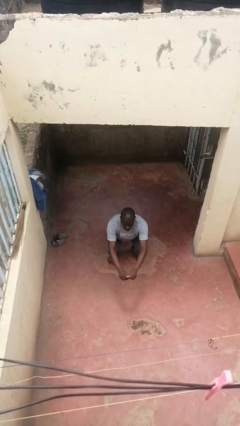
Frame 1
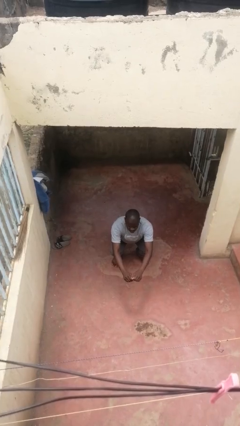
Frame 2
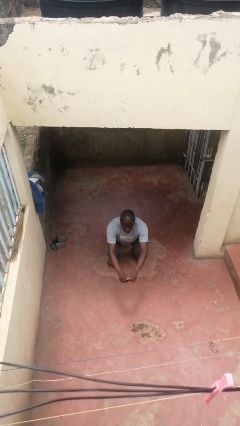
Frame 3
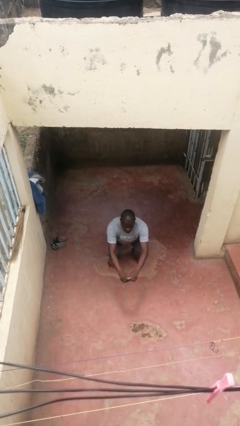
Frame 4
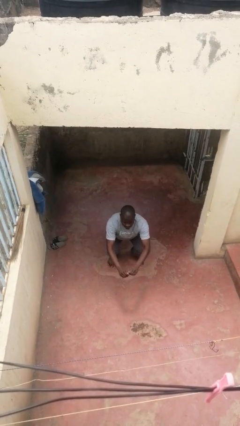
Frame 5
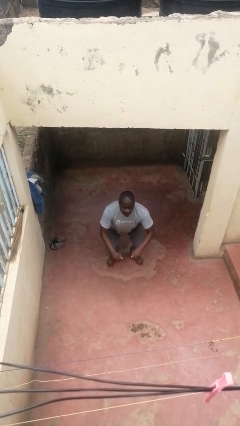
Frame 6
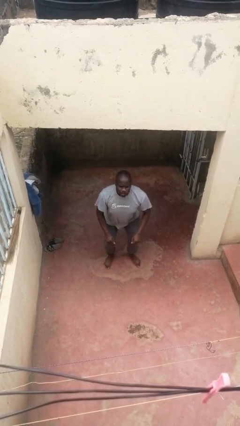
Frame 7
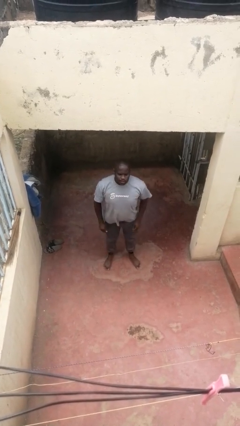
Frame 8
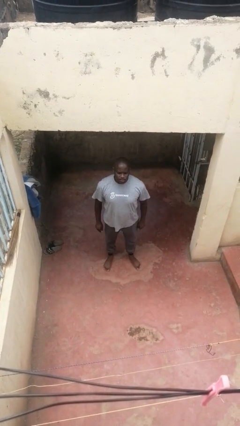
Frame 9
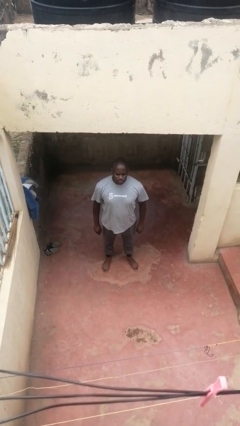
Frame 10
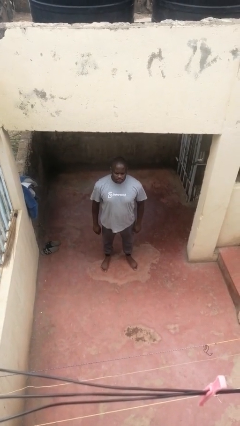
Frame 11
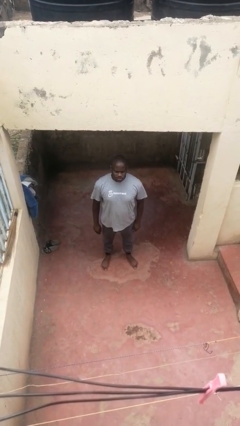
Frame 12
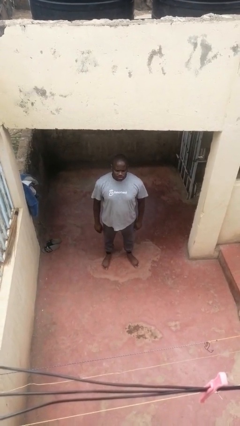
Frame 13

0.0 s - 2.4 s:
person stands up

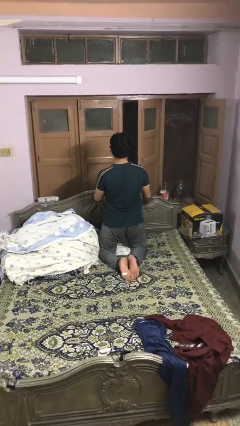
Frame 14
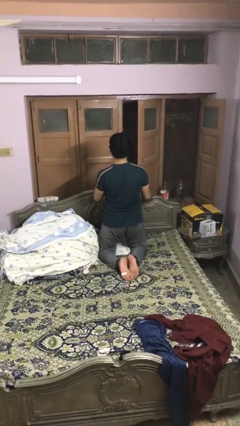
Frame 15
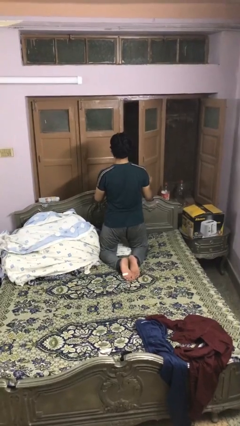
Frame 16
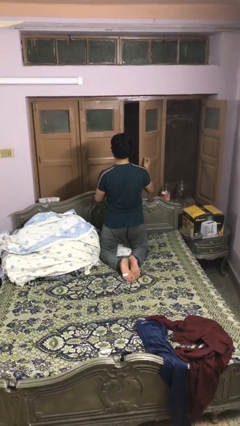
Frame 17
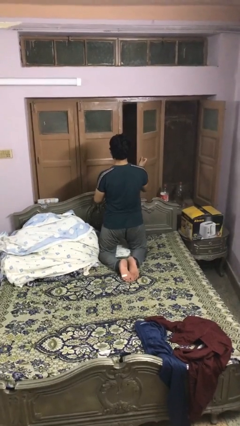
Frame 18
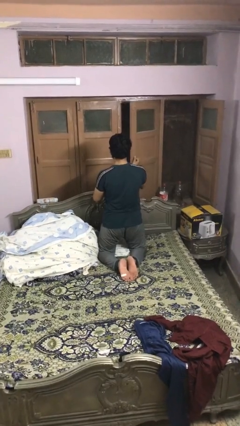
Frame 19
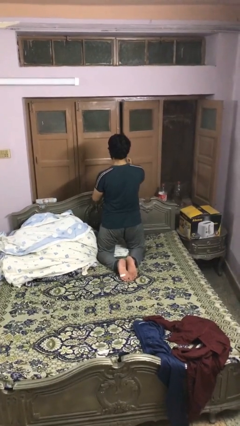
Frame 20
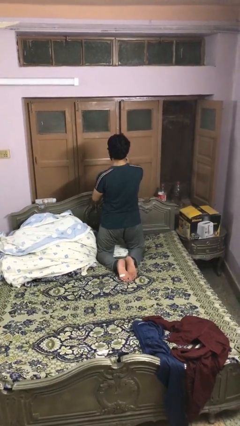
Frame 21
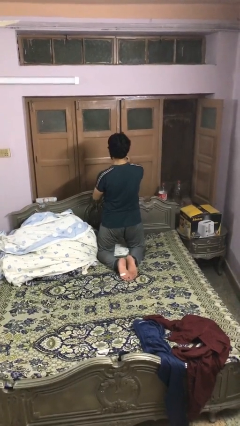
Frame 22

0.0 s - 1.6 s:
person closes home window

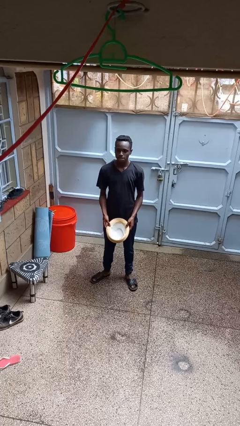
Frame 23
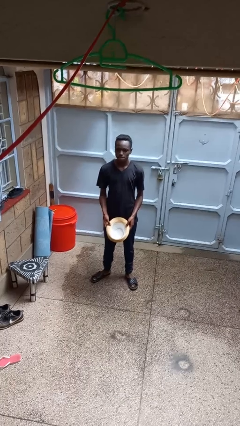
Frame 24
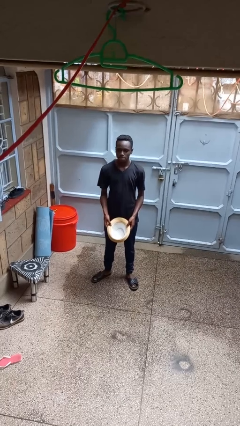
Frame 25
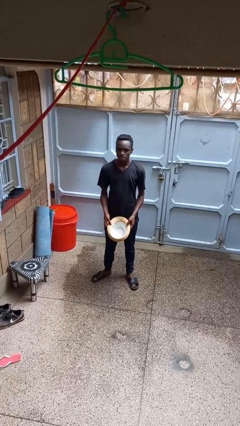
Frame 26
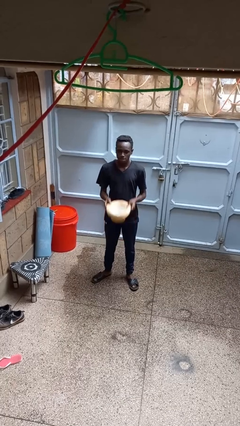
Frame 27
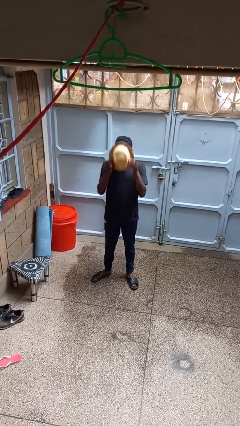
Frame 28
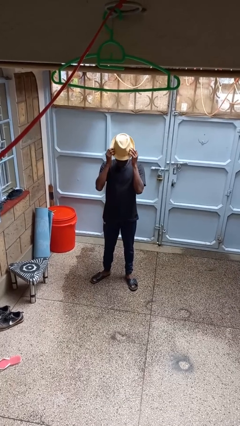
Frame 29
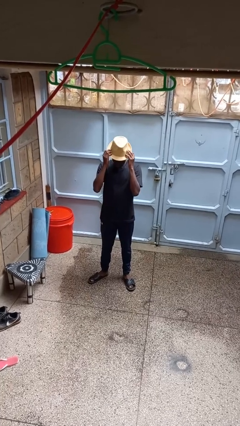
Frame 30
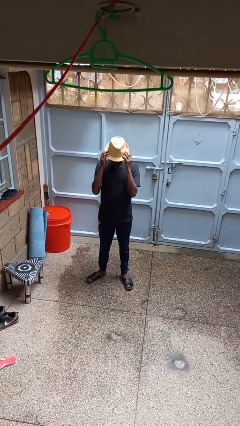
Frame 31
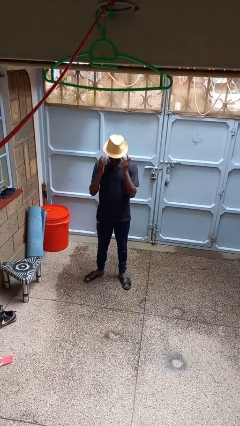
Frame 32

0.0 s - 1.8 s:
person puts on hat

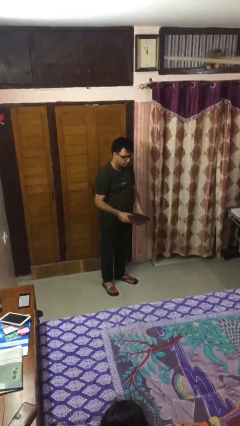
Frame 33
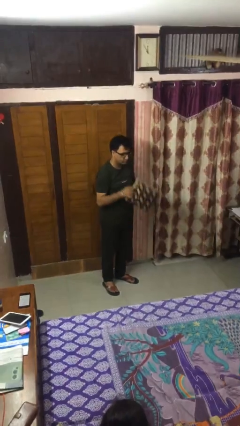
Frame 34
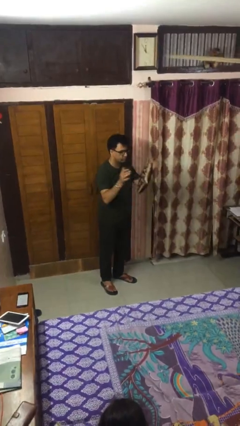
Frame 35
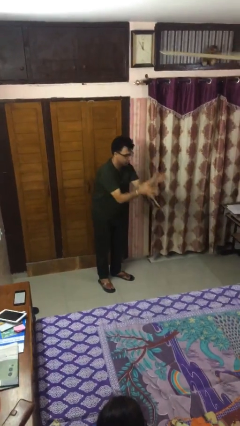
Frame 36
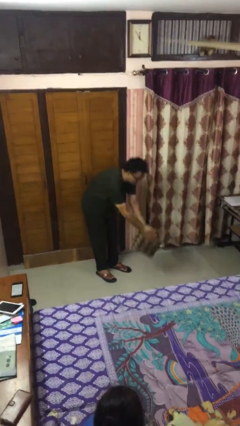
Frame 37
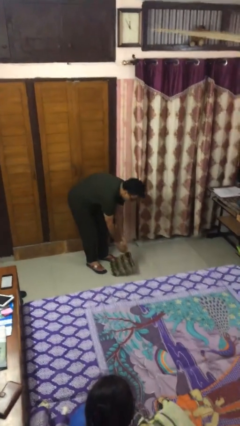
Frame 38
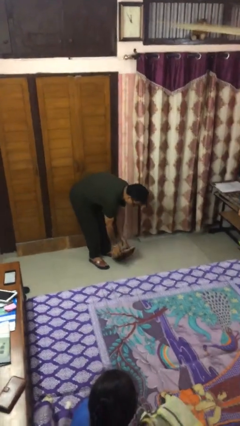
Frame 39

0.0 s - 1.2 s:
person drops object

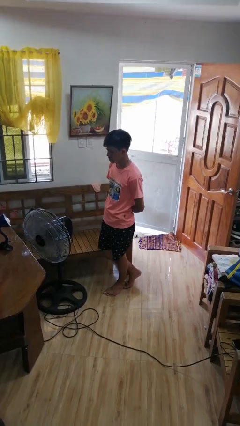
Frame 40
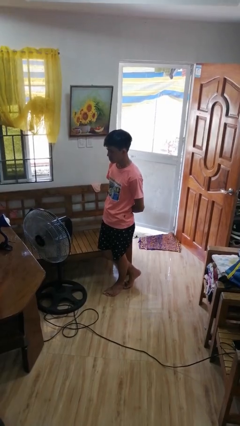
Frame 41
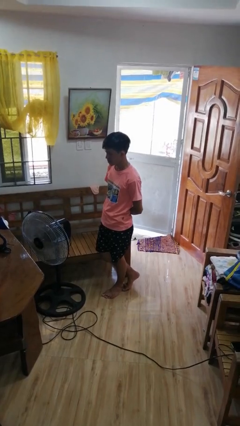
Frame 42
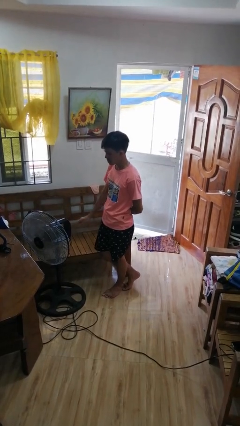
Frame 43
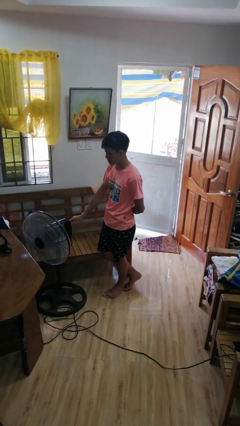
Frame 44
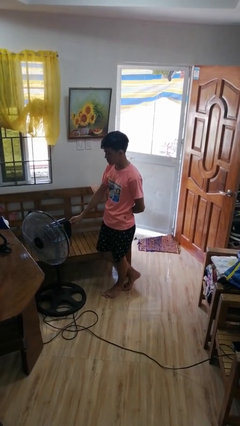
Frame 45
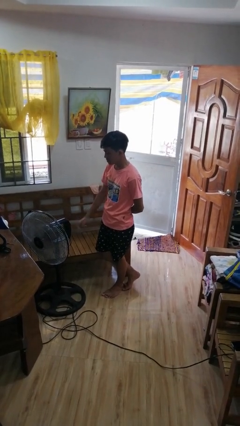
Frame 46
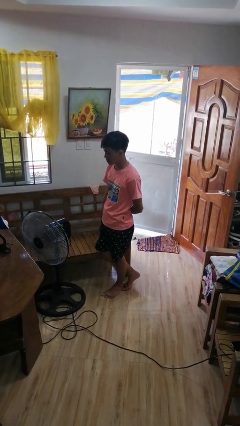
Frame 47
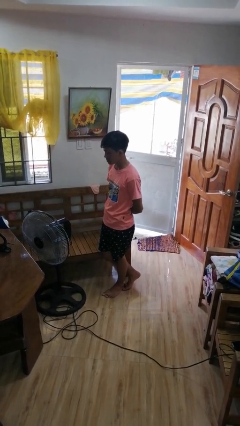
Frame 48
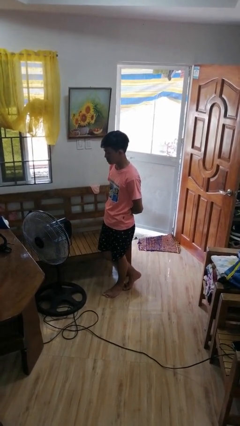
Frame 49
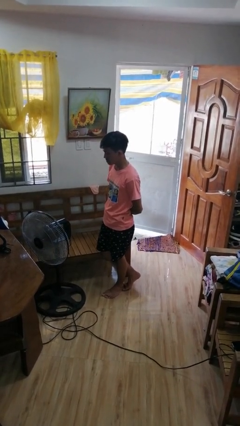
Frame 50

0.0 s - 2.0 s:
person turns off fan

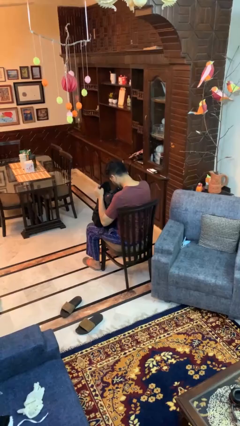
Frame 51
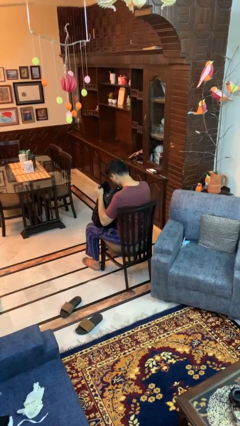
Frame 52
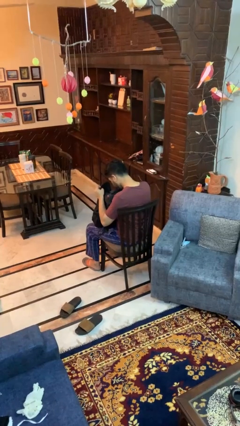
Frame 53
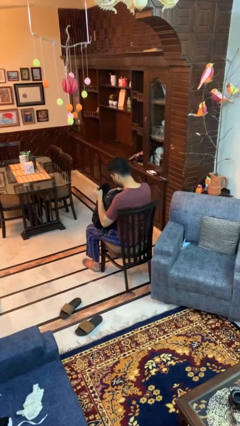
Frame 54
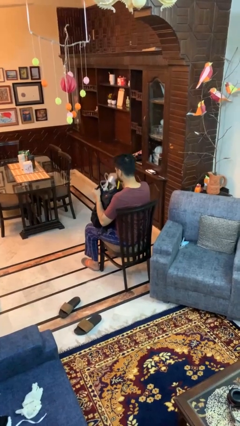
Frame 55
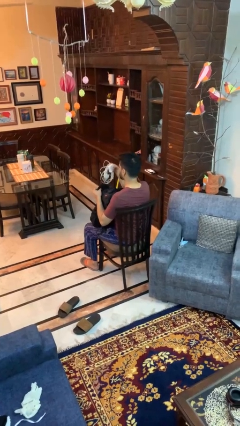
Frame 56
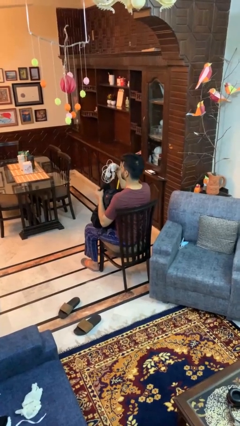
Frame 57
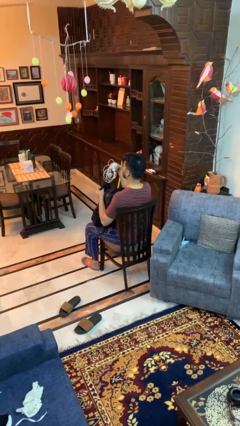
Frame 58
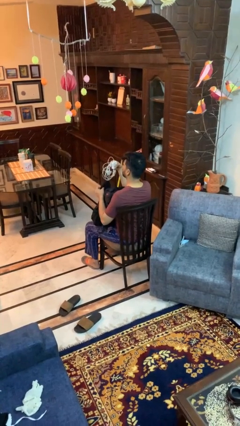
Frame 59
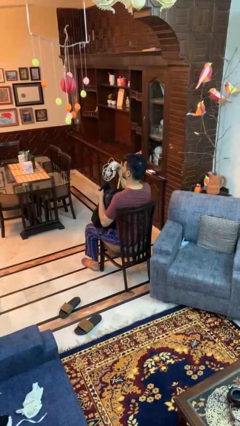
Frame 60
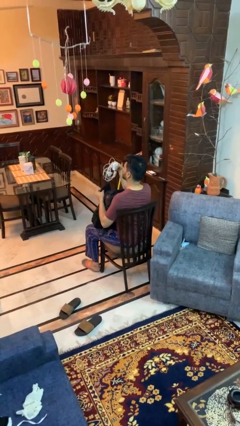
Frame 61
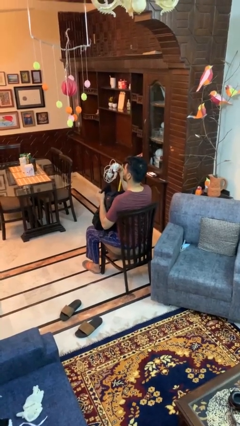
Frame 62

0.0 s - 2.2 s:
person takes object from backpack

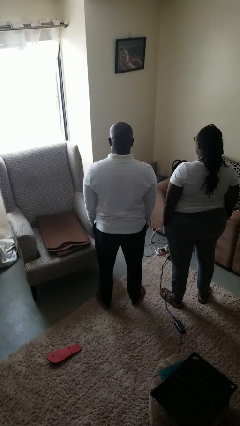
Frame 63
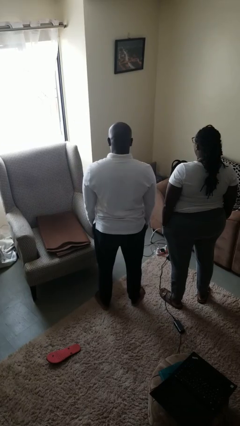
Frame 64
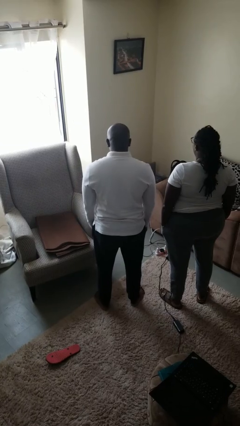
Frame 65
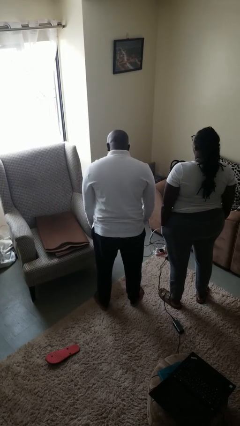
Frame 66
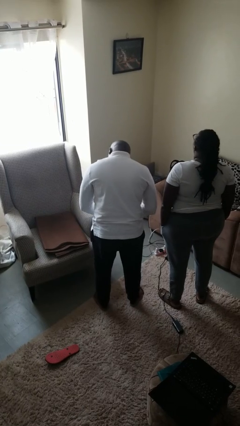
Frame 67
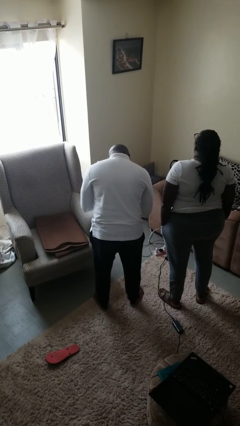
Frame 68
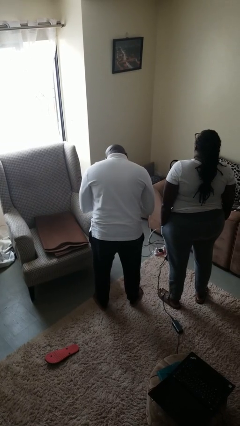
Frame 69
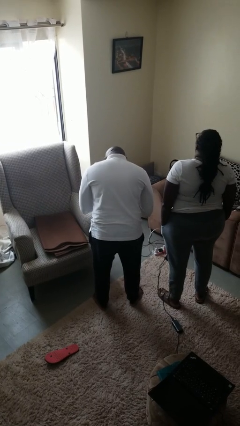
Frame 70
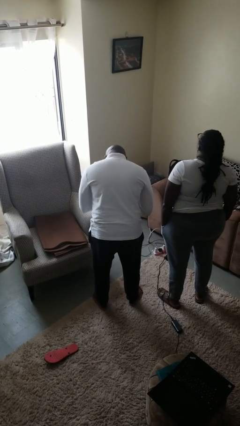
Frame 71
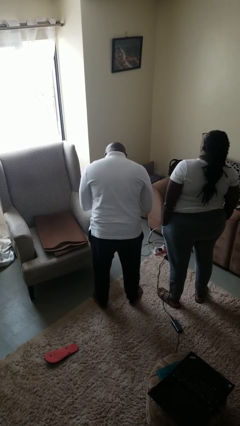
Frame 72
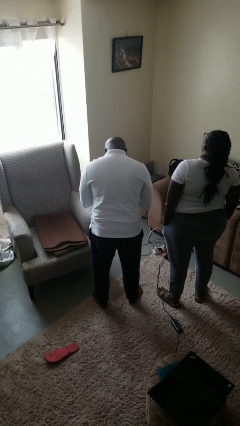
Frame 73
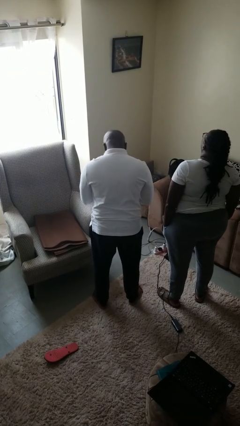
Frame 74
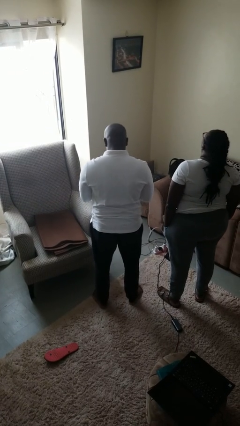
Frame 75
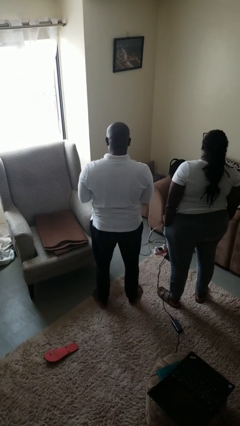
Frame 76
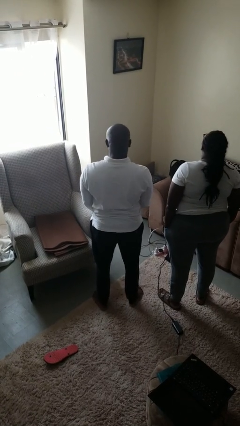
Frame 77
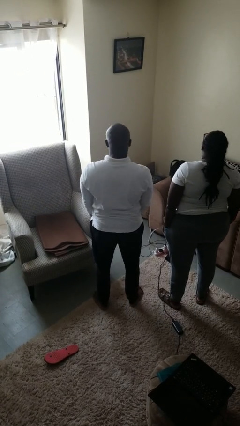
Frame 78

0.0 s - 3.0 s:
person laughs with person

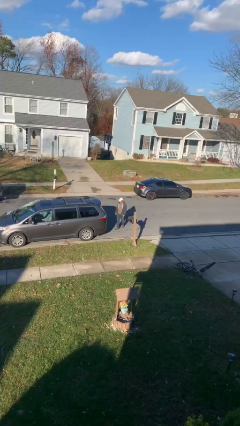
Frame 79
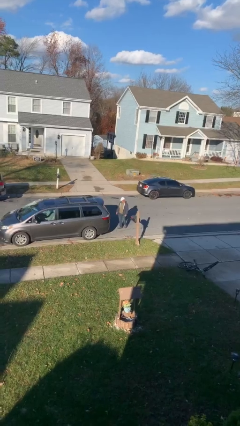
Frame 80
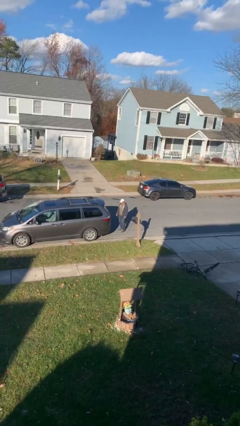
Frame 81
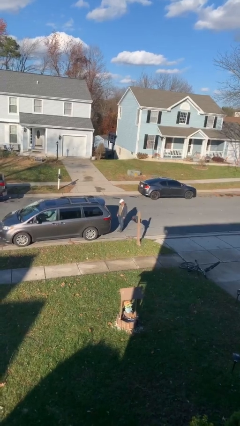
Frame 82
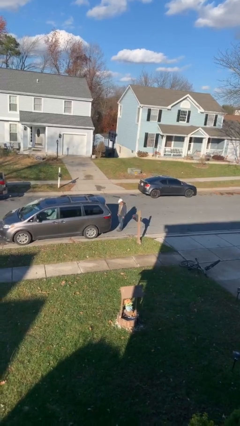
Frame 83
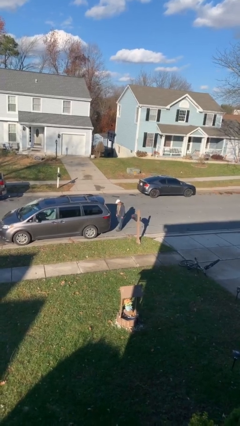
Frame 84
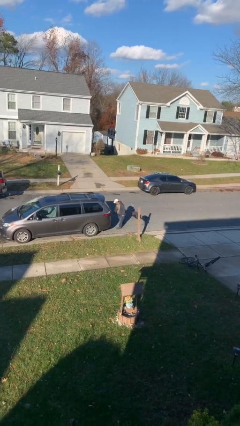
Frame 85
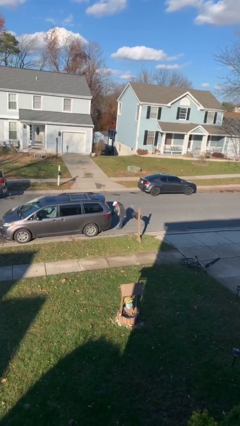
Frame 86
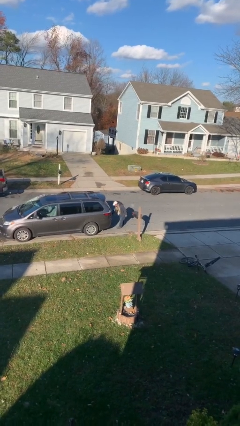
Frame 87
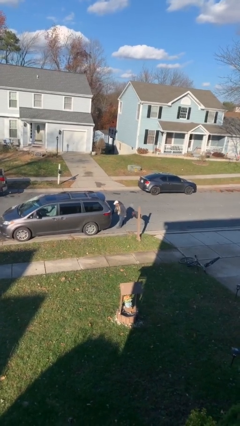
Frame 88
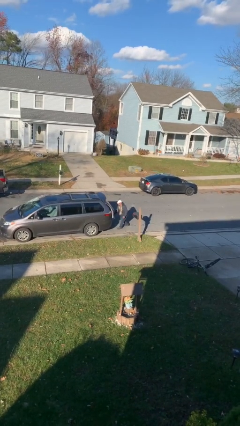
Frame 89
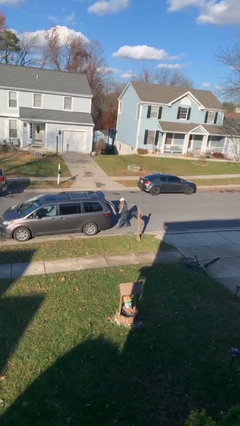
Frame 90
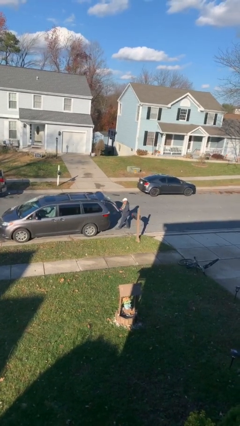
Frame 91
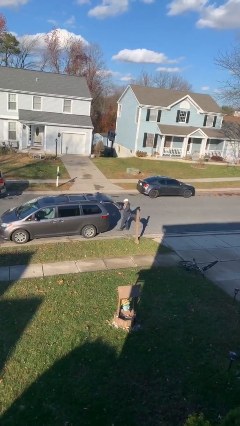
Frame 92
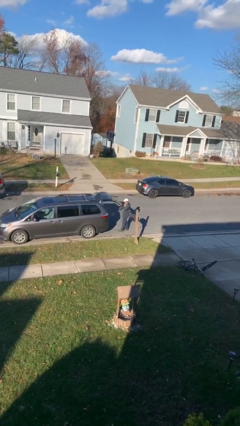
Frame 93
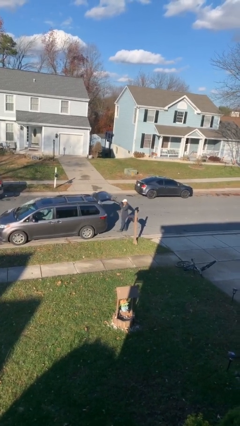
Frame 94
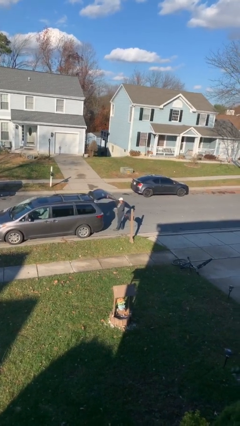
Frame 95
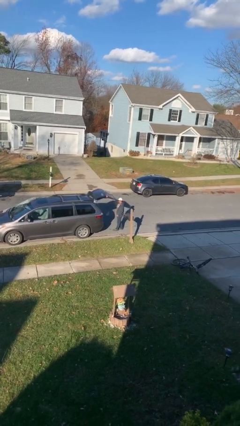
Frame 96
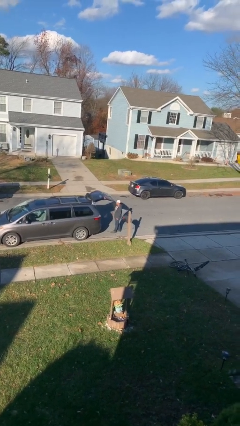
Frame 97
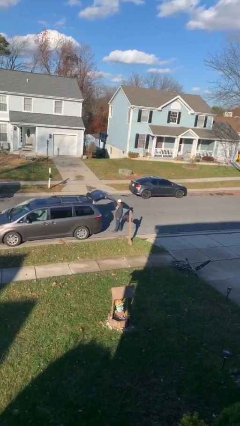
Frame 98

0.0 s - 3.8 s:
person opens car trunk
